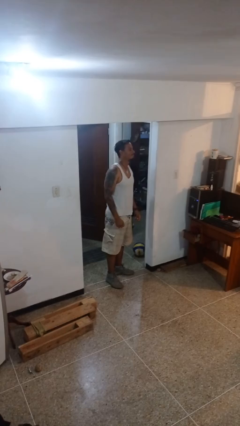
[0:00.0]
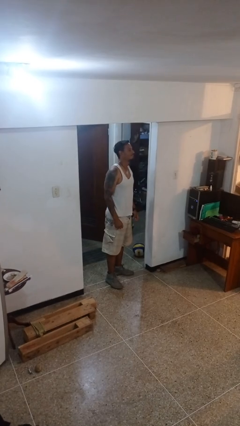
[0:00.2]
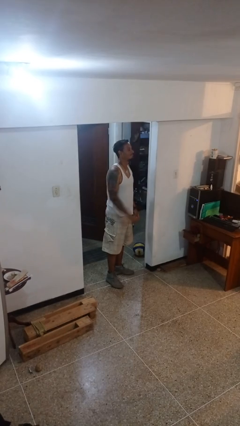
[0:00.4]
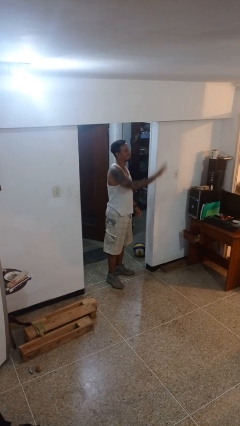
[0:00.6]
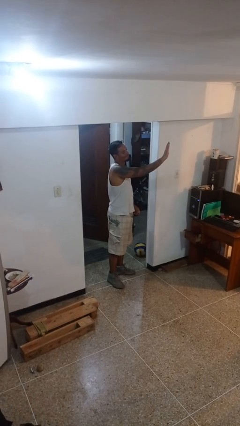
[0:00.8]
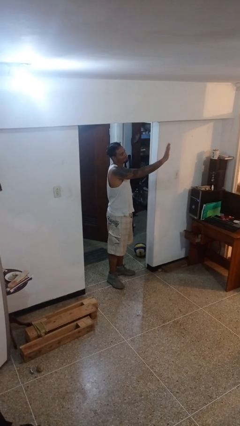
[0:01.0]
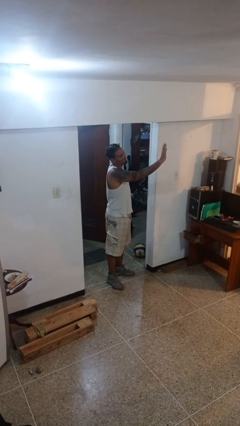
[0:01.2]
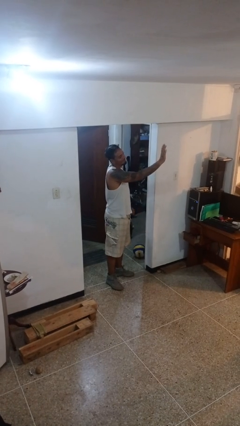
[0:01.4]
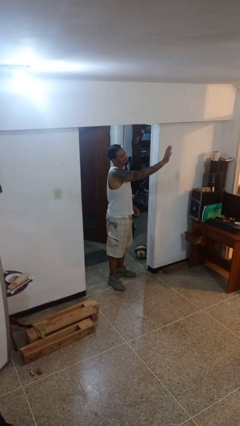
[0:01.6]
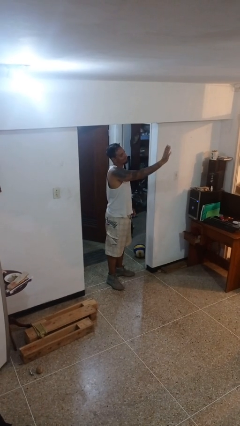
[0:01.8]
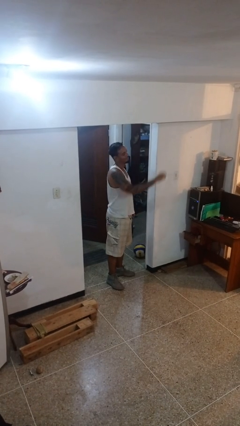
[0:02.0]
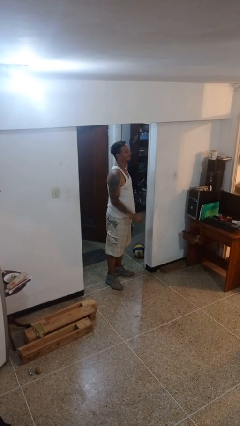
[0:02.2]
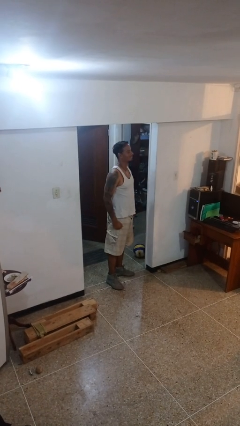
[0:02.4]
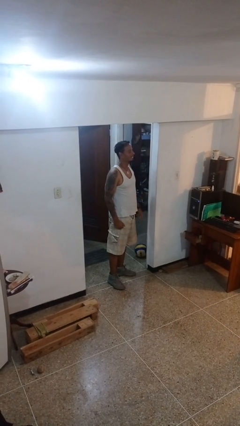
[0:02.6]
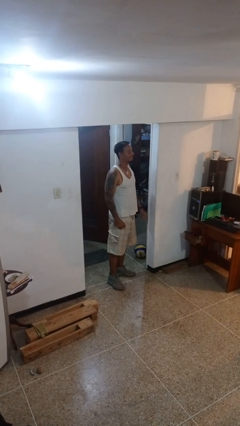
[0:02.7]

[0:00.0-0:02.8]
person waves at person

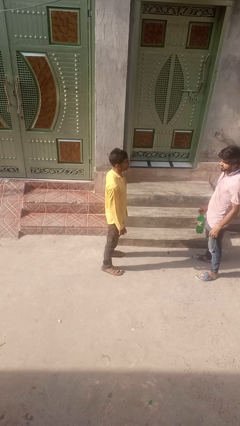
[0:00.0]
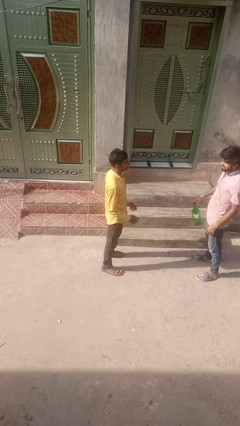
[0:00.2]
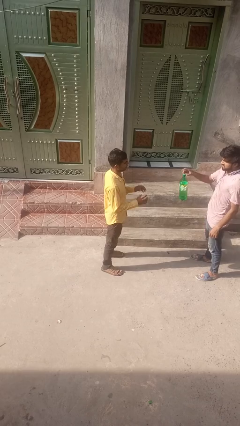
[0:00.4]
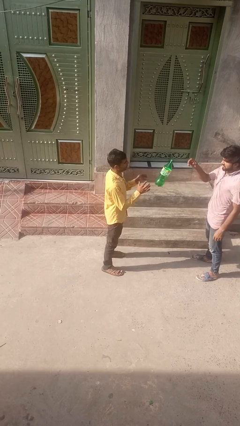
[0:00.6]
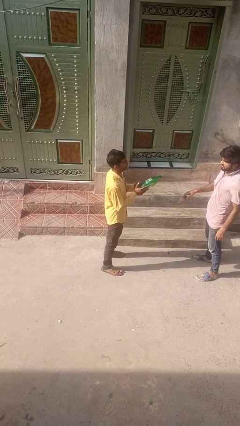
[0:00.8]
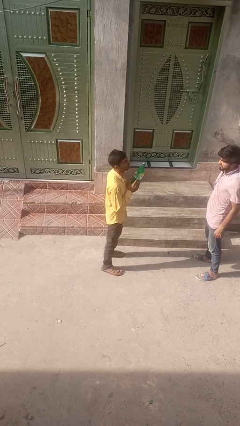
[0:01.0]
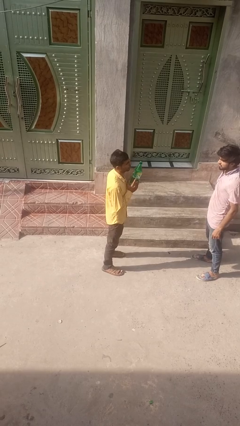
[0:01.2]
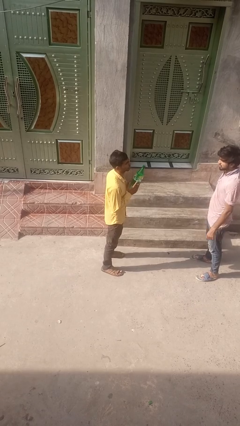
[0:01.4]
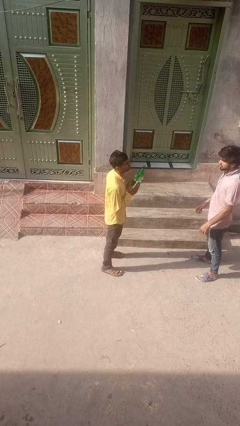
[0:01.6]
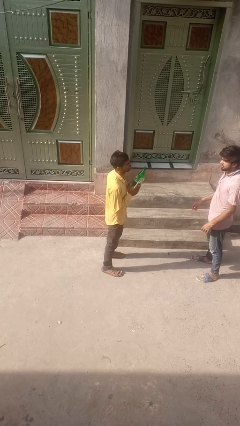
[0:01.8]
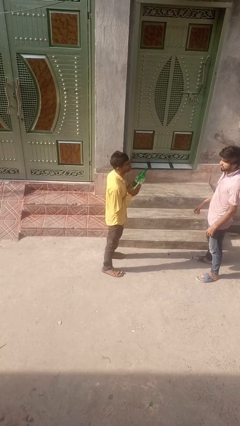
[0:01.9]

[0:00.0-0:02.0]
person catches object from person

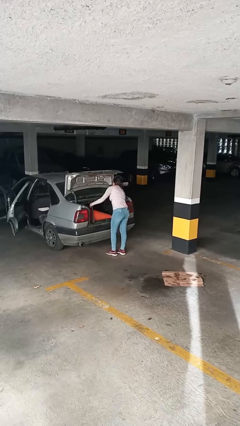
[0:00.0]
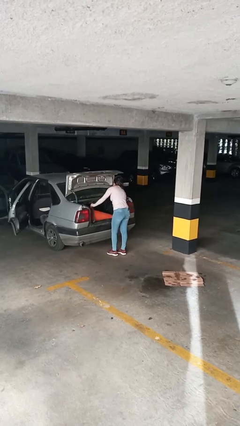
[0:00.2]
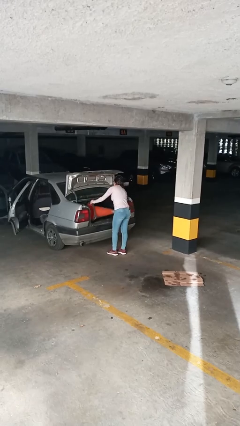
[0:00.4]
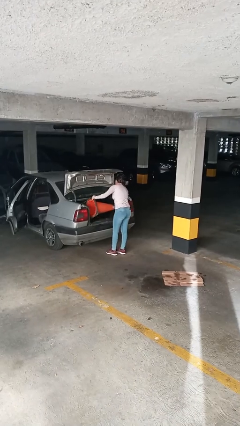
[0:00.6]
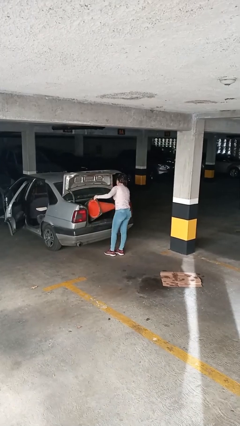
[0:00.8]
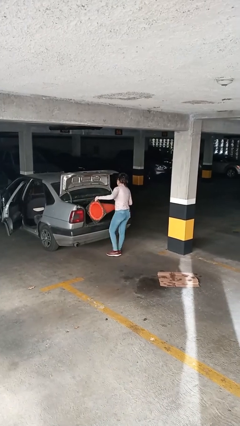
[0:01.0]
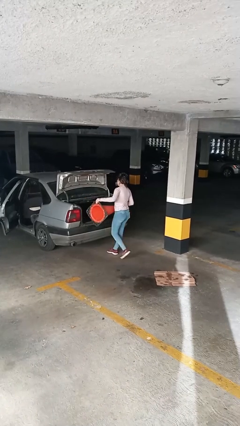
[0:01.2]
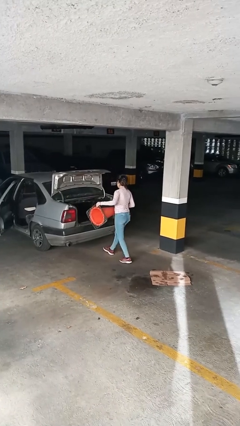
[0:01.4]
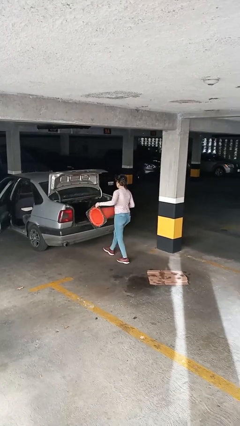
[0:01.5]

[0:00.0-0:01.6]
person unloads car

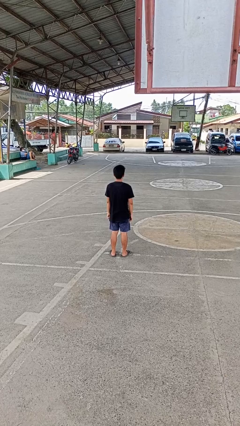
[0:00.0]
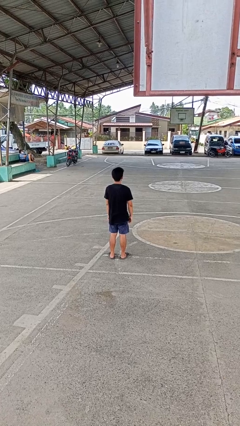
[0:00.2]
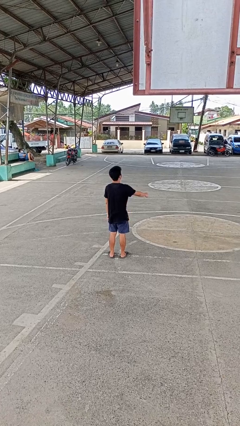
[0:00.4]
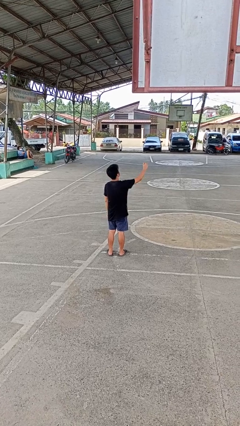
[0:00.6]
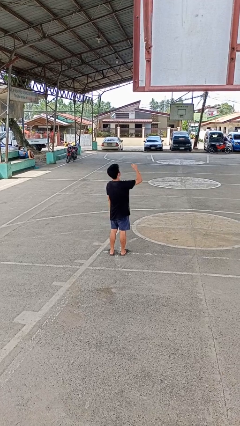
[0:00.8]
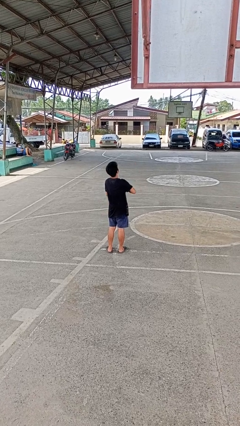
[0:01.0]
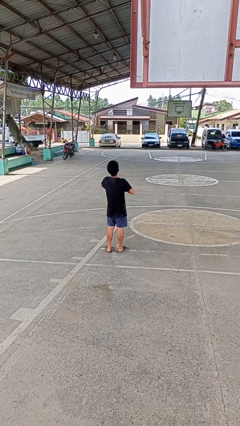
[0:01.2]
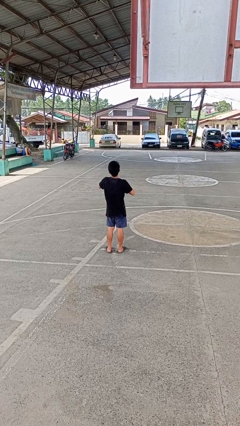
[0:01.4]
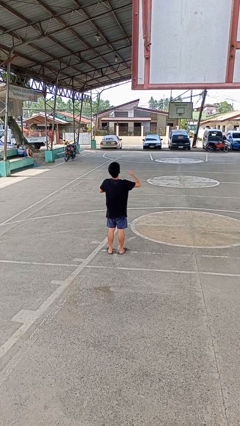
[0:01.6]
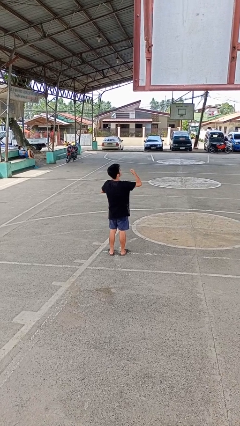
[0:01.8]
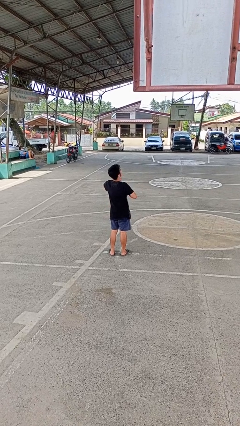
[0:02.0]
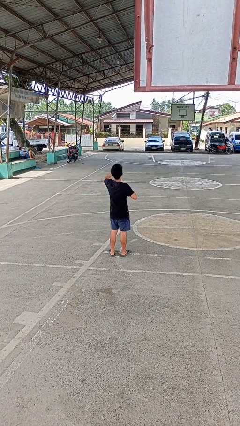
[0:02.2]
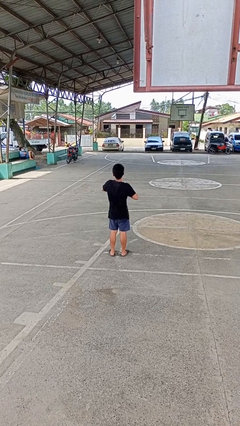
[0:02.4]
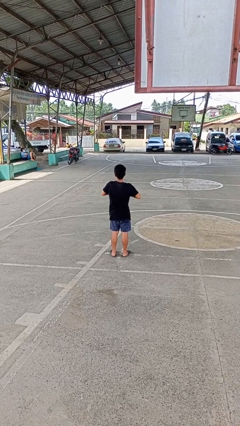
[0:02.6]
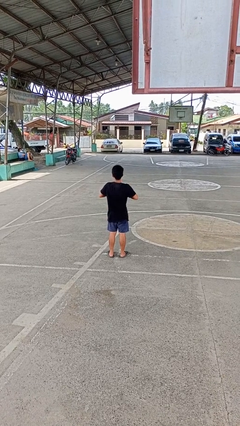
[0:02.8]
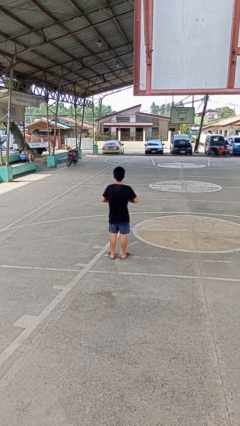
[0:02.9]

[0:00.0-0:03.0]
person drums on chest

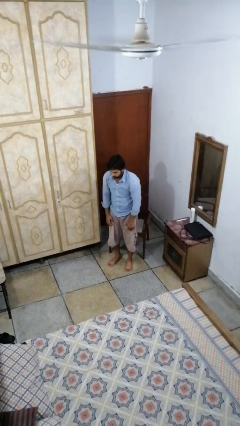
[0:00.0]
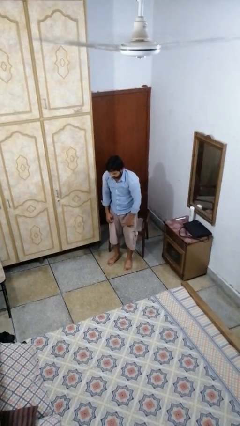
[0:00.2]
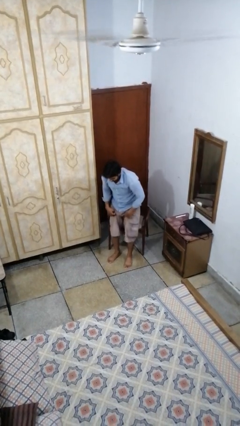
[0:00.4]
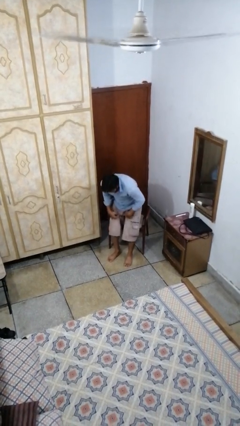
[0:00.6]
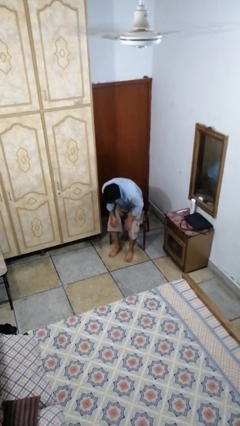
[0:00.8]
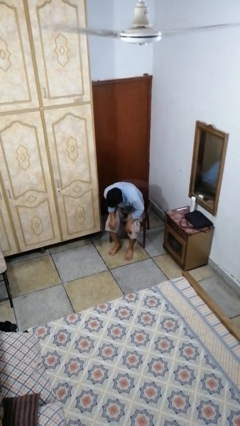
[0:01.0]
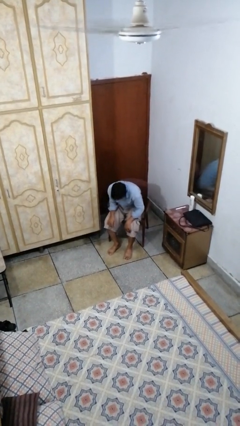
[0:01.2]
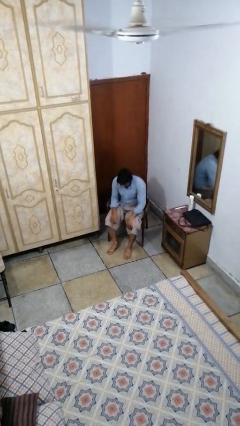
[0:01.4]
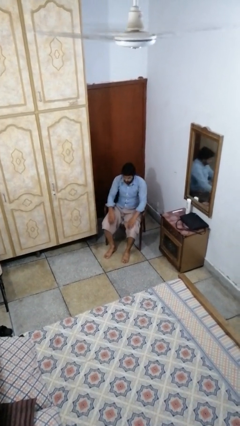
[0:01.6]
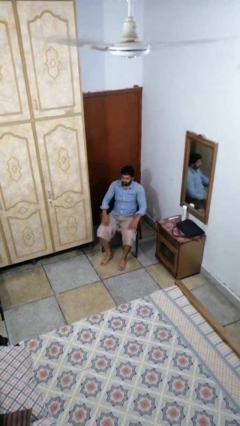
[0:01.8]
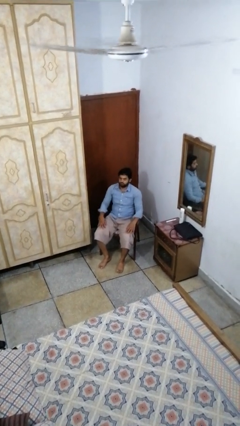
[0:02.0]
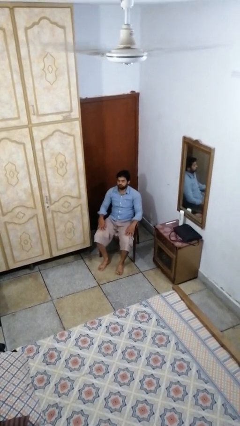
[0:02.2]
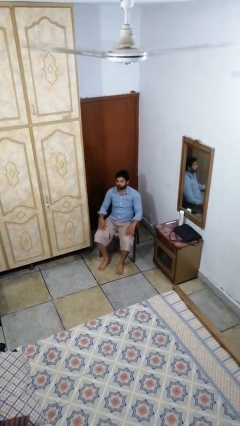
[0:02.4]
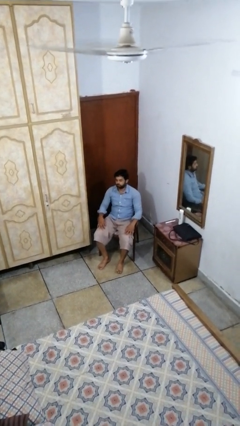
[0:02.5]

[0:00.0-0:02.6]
person sits down

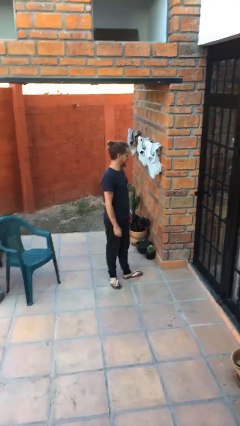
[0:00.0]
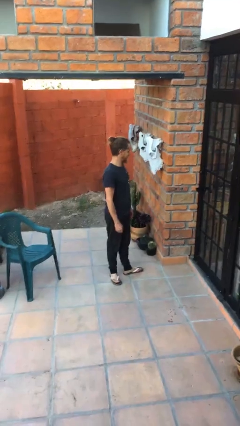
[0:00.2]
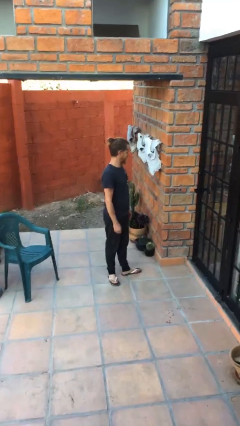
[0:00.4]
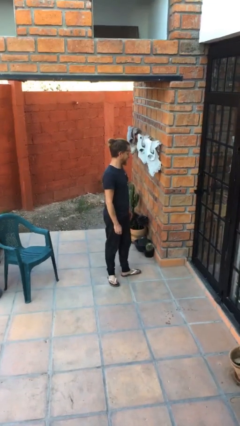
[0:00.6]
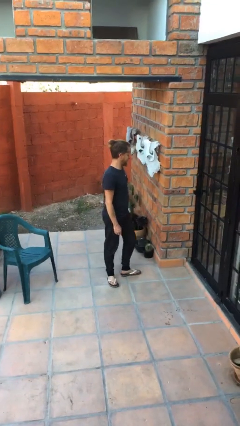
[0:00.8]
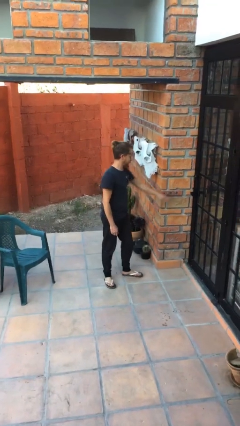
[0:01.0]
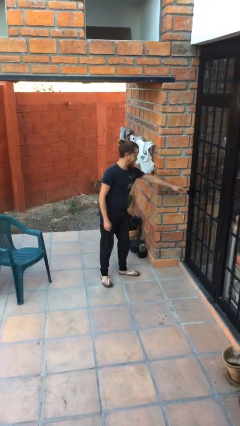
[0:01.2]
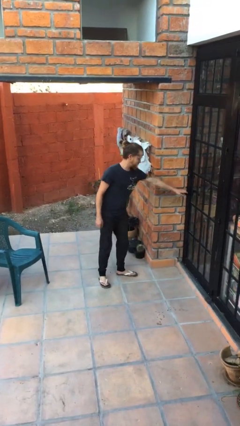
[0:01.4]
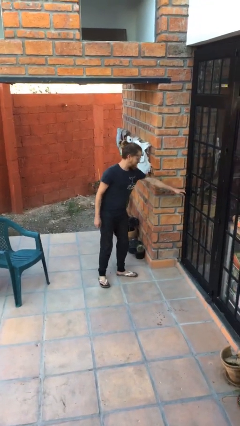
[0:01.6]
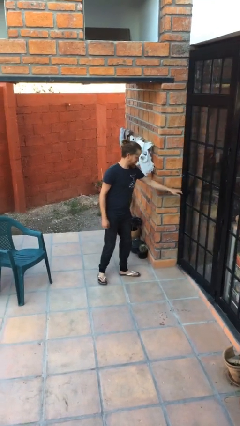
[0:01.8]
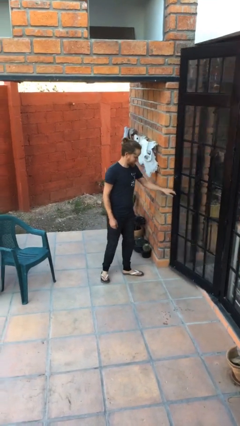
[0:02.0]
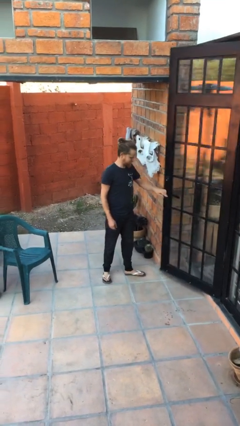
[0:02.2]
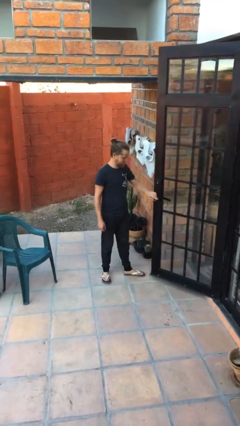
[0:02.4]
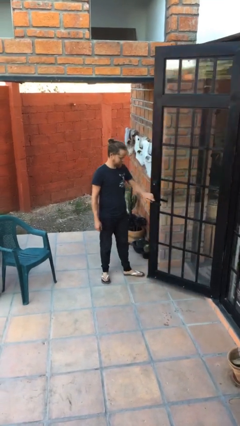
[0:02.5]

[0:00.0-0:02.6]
person opens facility door

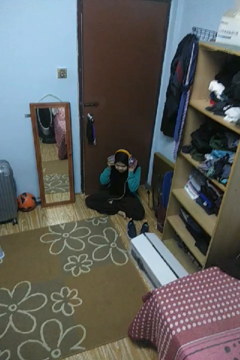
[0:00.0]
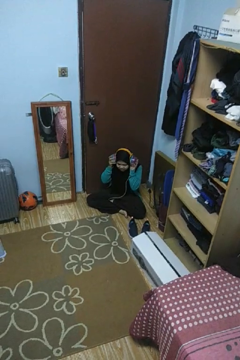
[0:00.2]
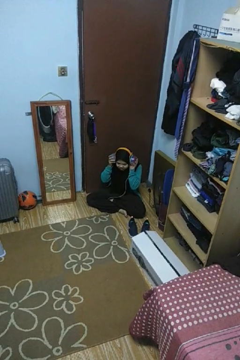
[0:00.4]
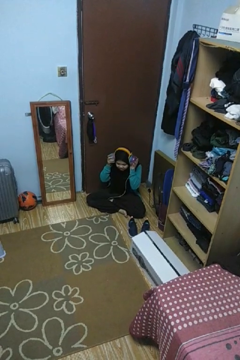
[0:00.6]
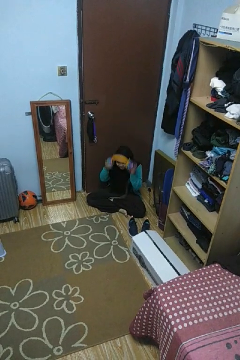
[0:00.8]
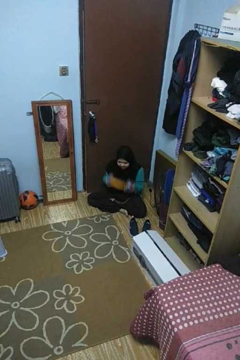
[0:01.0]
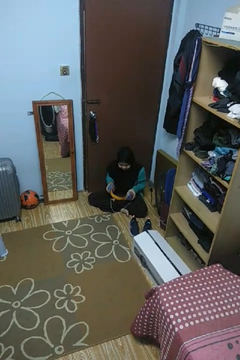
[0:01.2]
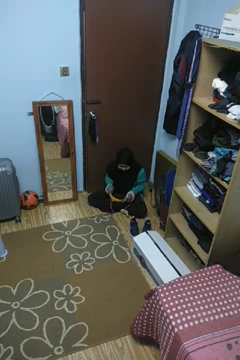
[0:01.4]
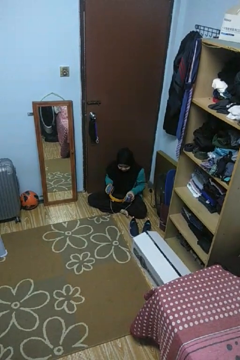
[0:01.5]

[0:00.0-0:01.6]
person takes off headphones

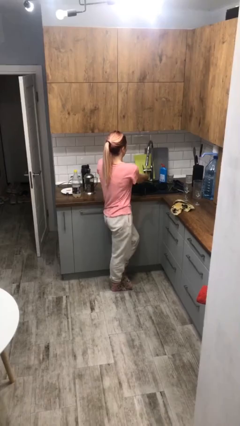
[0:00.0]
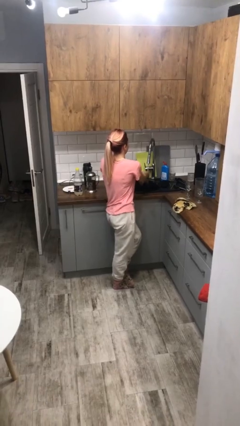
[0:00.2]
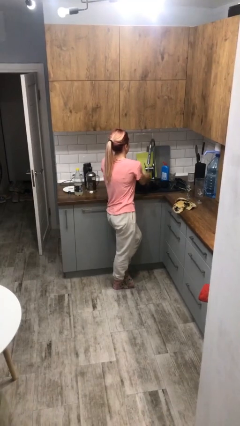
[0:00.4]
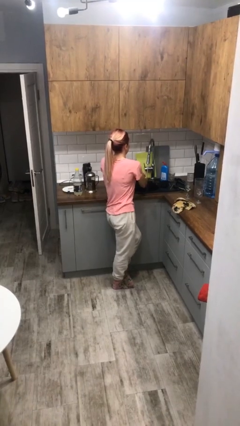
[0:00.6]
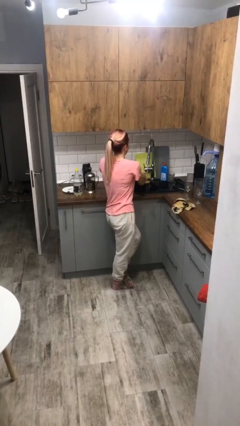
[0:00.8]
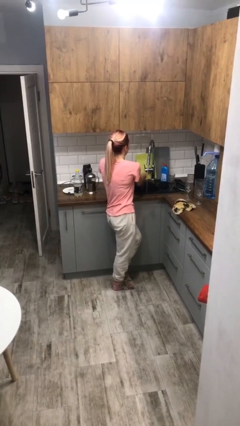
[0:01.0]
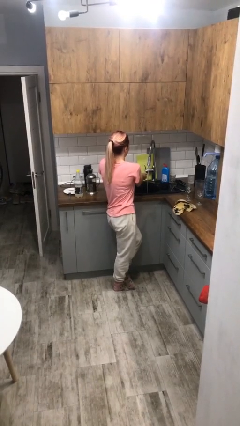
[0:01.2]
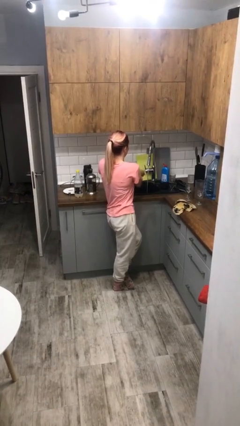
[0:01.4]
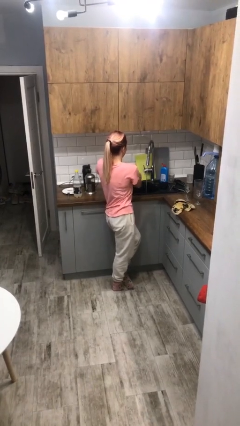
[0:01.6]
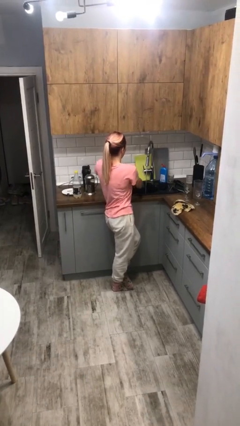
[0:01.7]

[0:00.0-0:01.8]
person washes hands
